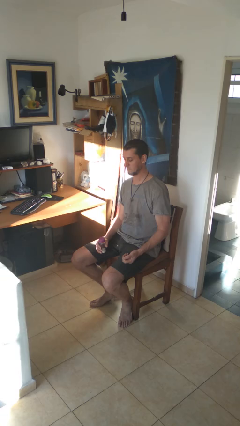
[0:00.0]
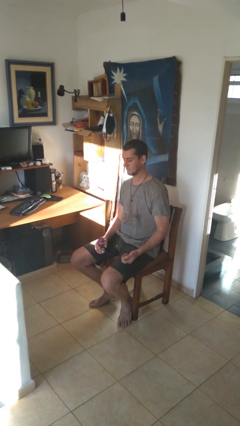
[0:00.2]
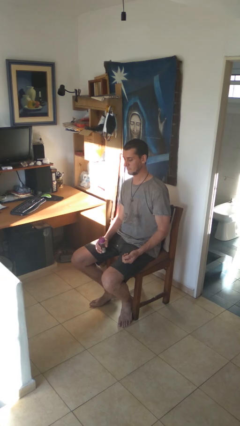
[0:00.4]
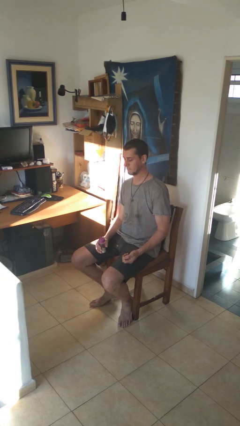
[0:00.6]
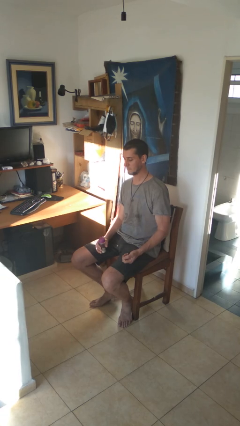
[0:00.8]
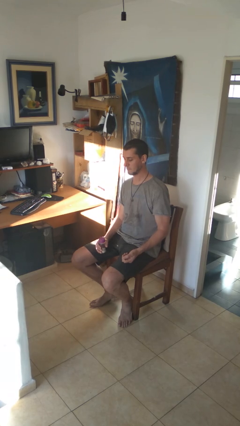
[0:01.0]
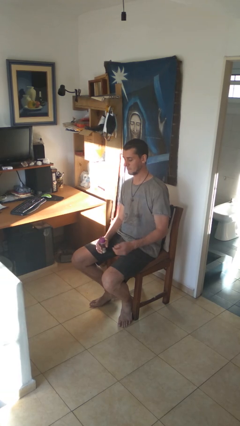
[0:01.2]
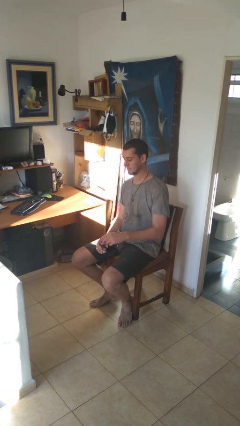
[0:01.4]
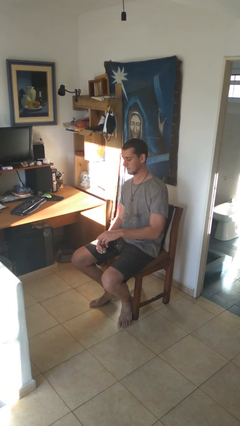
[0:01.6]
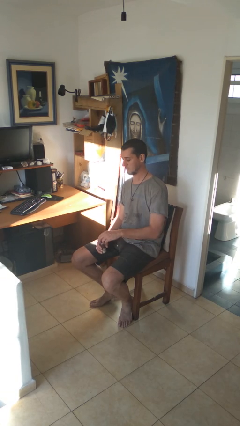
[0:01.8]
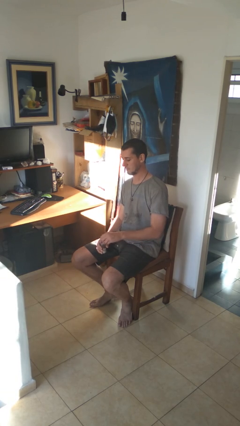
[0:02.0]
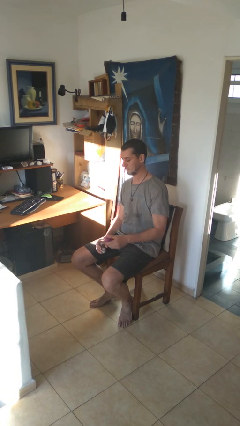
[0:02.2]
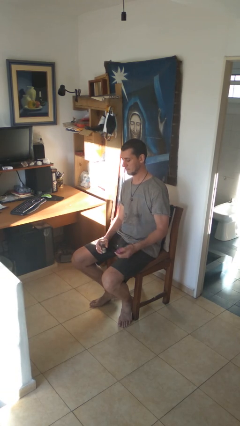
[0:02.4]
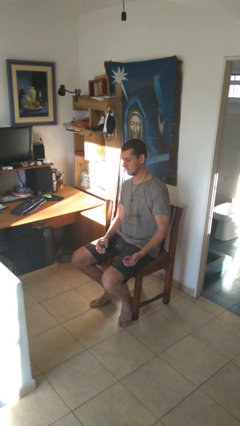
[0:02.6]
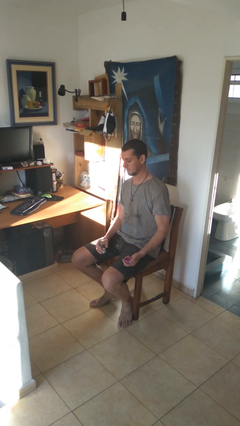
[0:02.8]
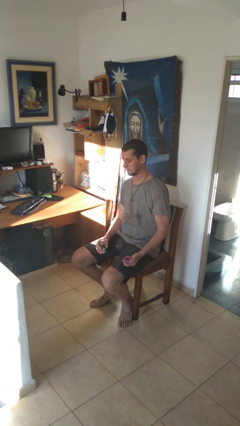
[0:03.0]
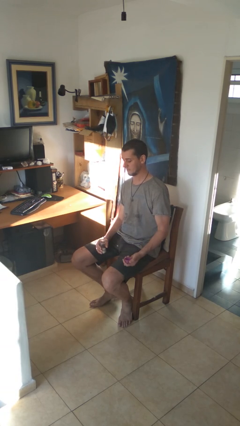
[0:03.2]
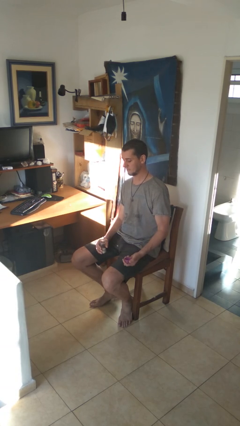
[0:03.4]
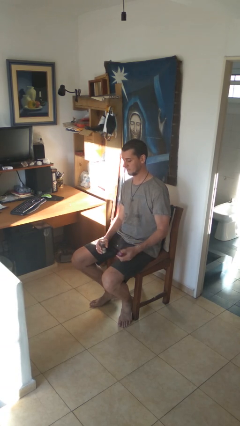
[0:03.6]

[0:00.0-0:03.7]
person opens jar

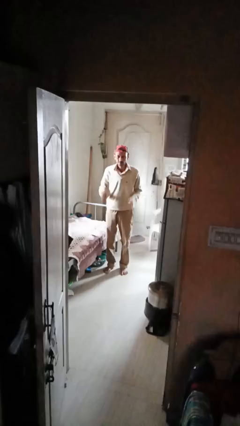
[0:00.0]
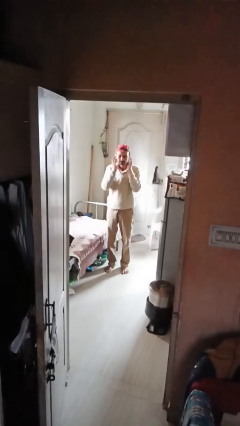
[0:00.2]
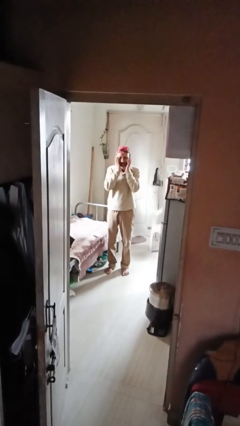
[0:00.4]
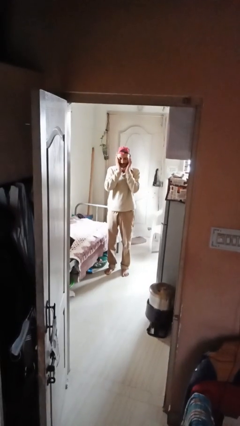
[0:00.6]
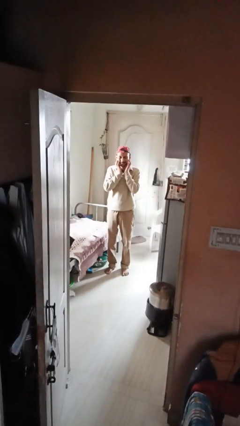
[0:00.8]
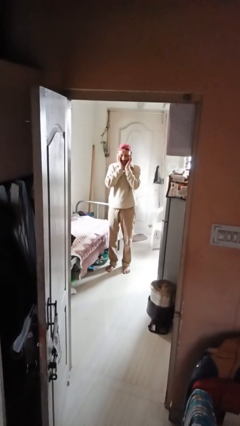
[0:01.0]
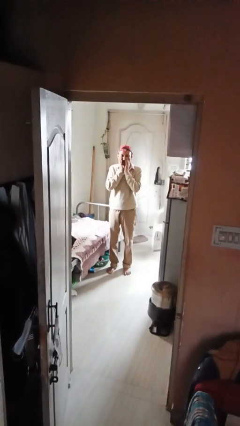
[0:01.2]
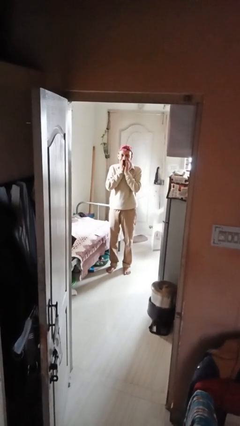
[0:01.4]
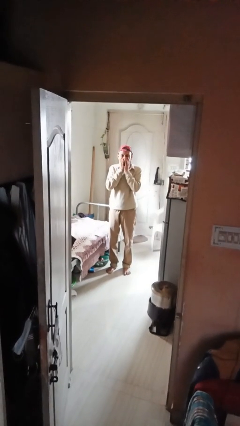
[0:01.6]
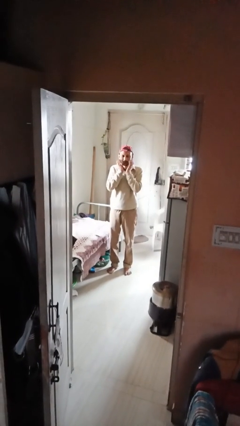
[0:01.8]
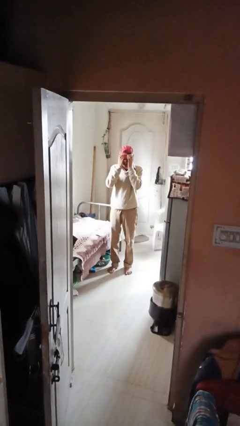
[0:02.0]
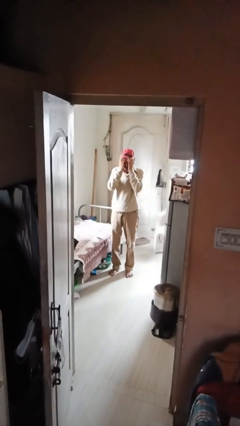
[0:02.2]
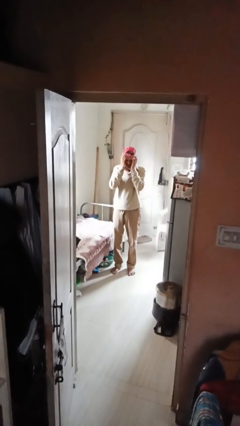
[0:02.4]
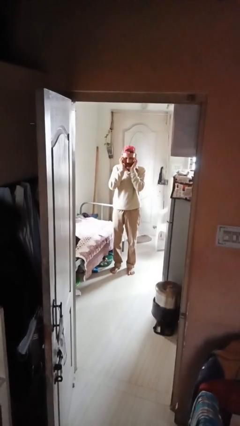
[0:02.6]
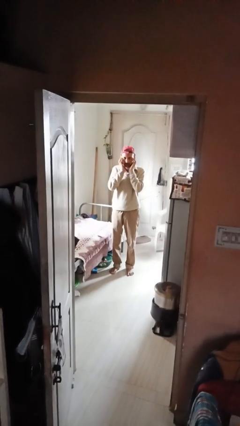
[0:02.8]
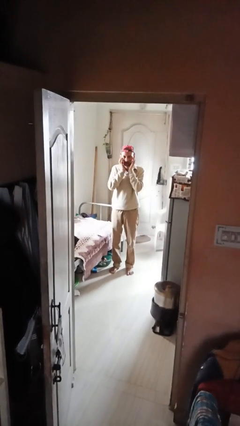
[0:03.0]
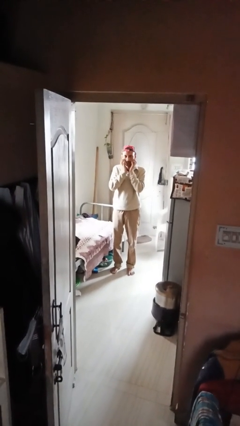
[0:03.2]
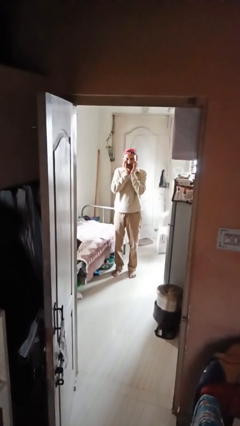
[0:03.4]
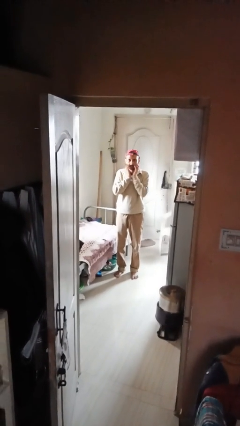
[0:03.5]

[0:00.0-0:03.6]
person scratches face

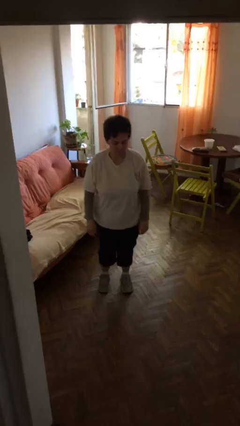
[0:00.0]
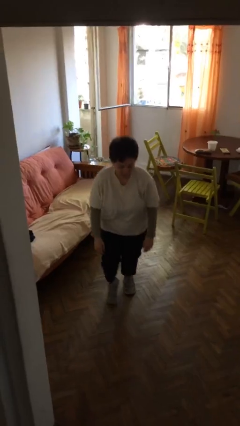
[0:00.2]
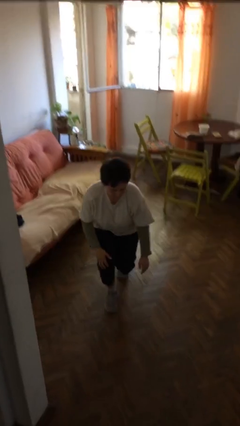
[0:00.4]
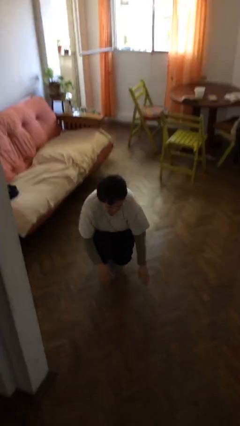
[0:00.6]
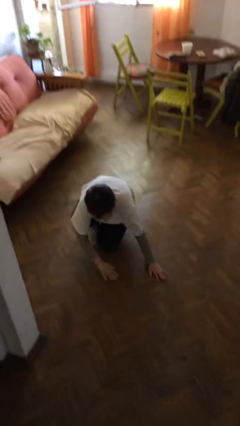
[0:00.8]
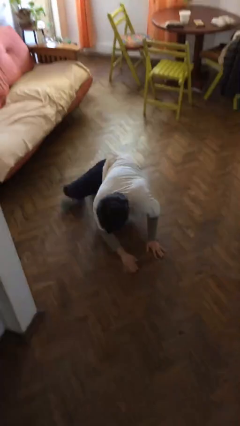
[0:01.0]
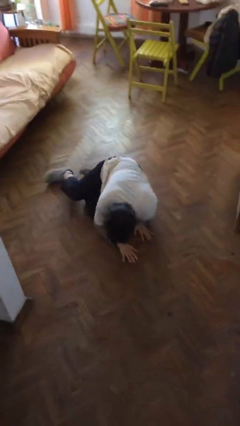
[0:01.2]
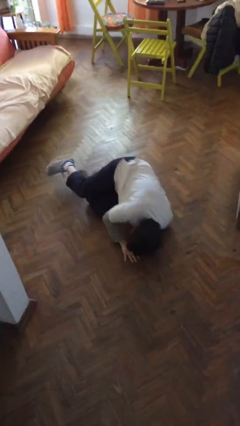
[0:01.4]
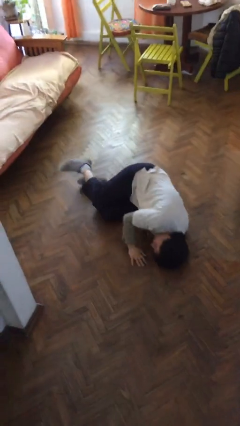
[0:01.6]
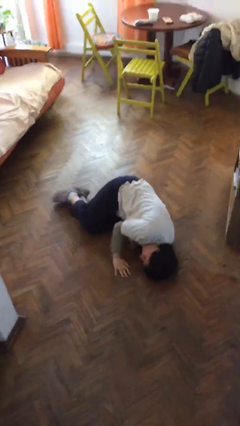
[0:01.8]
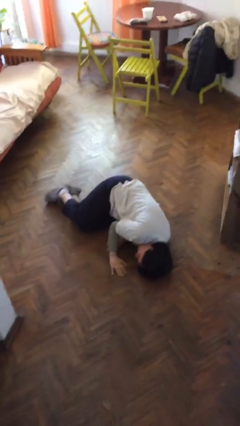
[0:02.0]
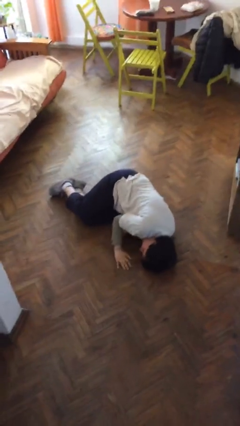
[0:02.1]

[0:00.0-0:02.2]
person falls while standing

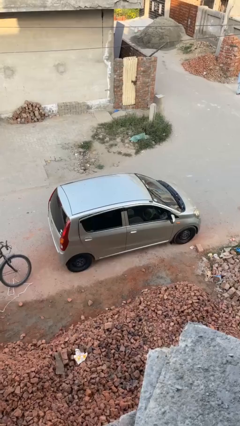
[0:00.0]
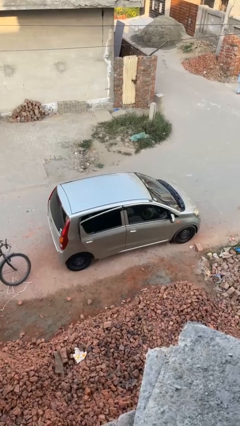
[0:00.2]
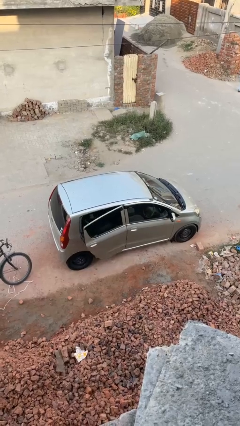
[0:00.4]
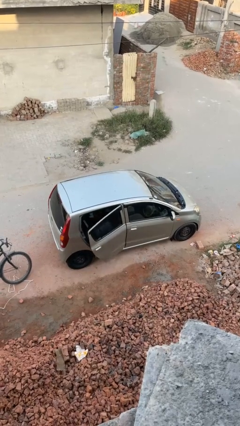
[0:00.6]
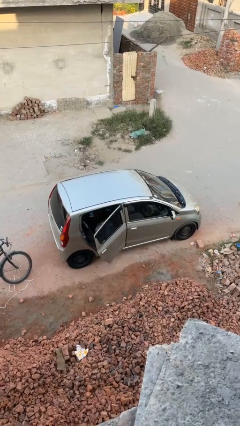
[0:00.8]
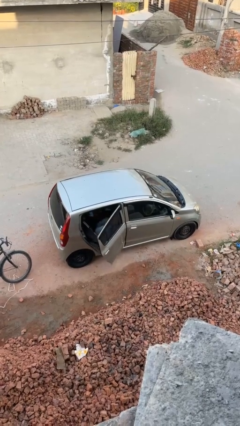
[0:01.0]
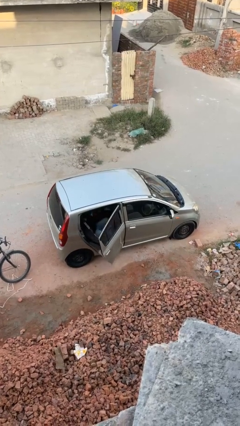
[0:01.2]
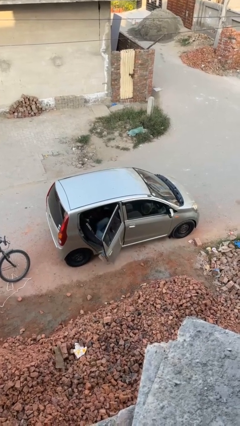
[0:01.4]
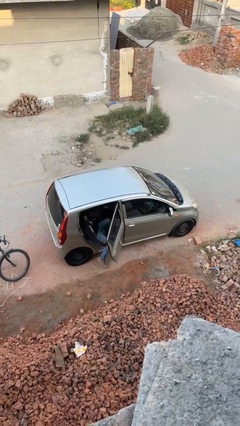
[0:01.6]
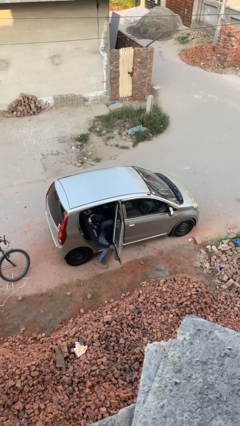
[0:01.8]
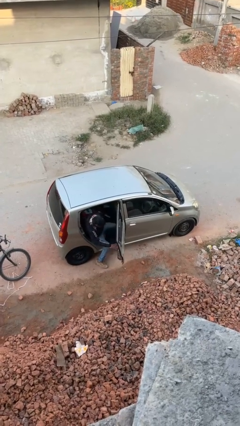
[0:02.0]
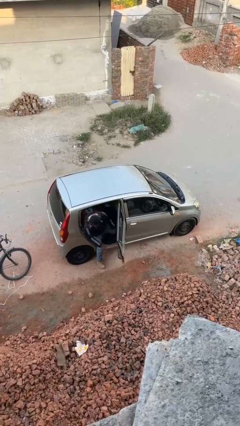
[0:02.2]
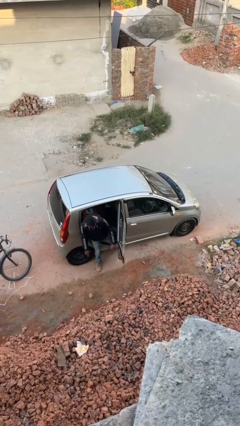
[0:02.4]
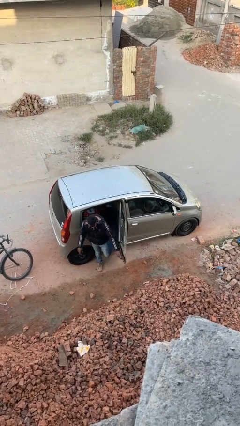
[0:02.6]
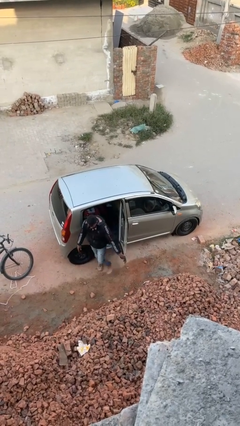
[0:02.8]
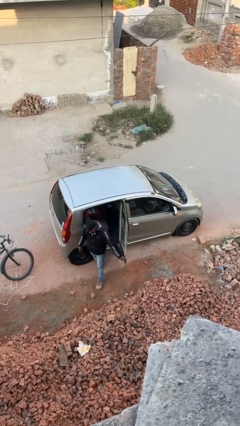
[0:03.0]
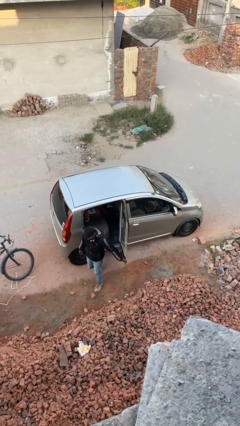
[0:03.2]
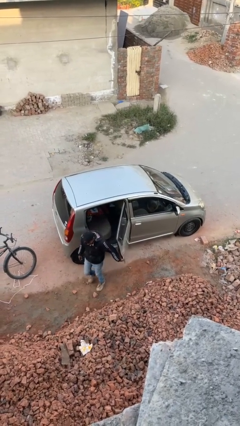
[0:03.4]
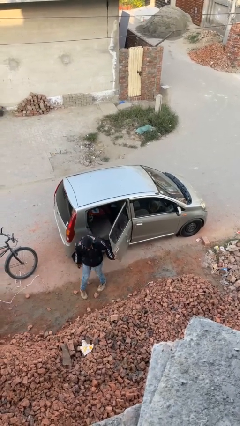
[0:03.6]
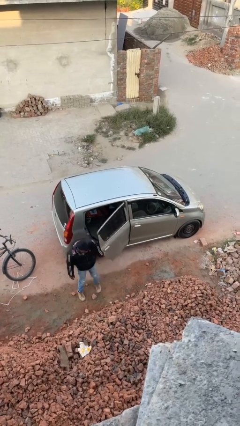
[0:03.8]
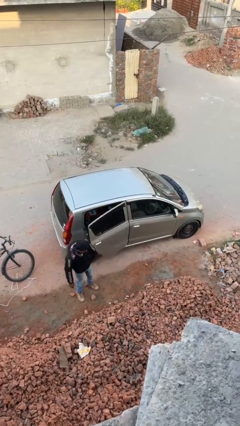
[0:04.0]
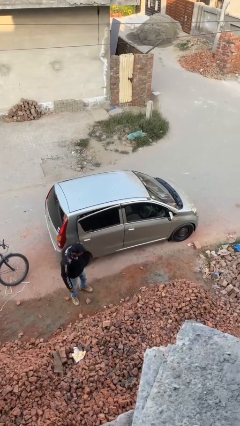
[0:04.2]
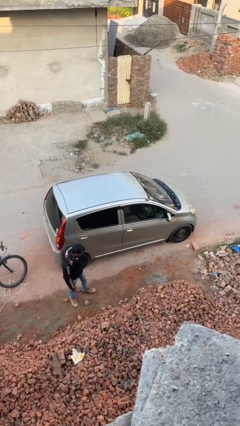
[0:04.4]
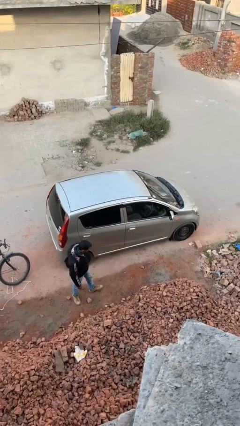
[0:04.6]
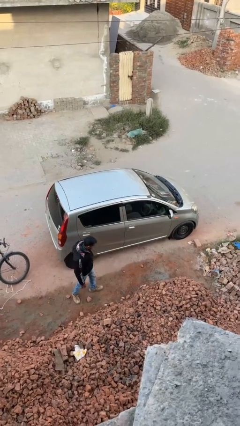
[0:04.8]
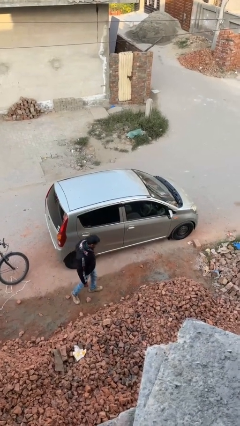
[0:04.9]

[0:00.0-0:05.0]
car drops off person

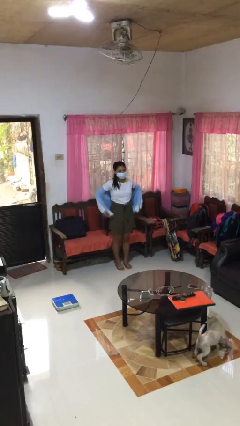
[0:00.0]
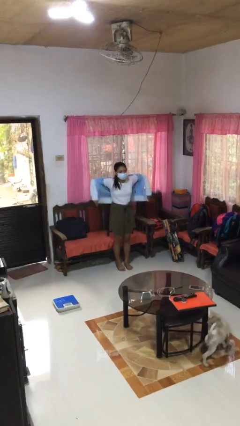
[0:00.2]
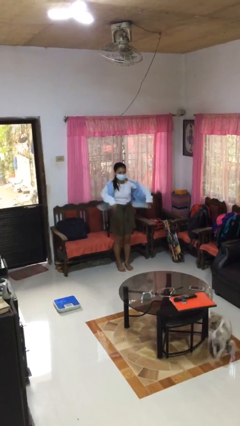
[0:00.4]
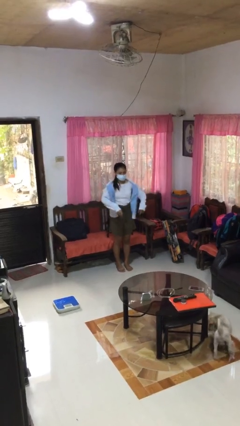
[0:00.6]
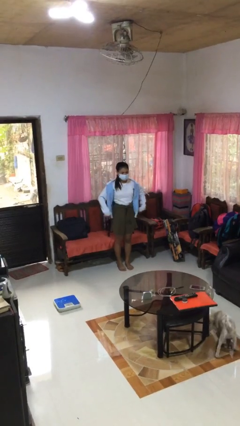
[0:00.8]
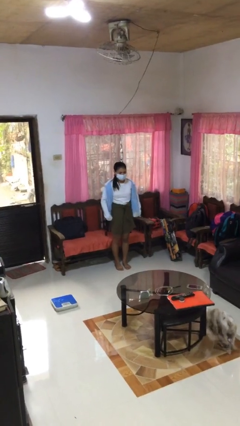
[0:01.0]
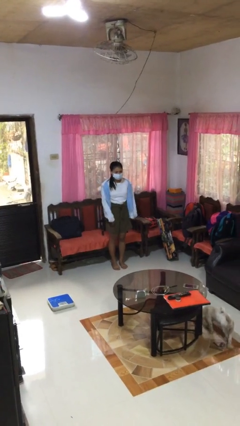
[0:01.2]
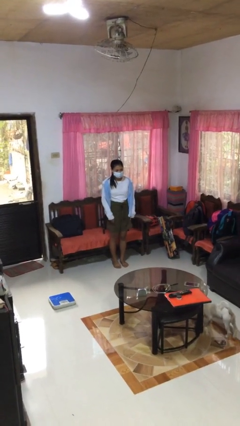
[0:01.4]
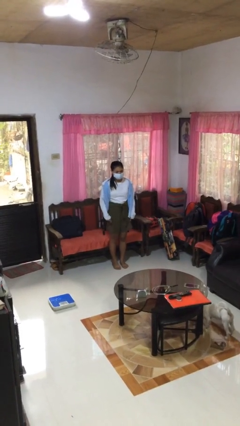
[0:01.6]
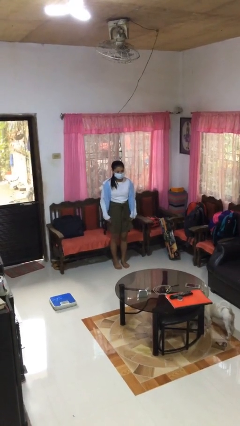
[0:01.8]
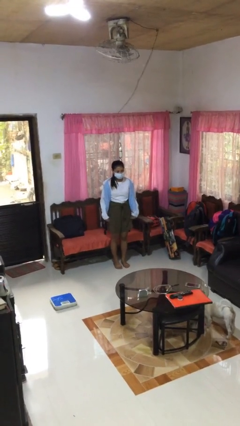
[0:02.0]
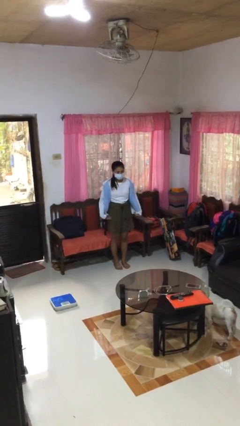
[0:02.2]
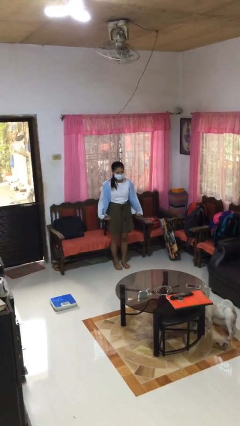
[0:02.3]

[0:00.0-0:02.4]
person puts on jacket

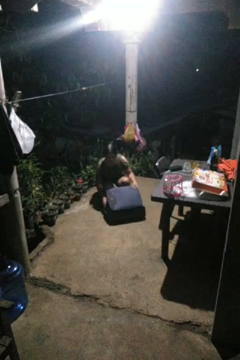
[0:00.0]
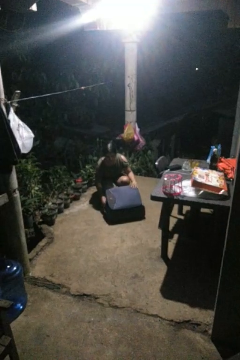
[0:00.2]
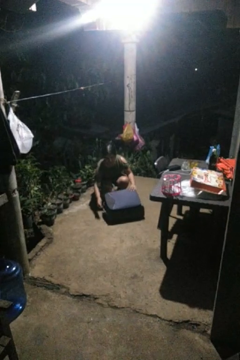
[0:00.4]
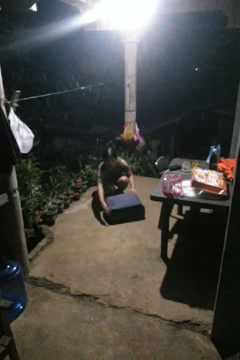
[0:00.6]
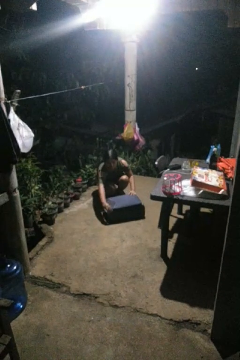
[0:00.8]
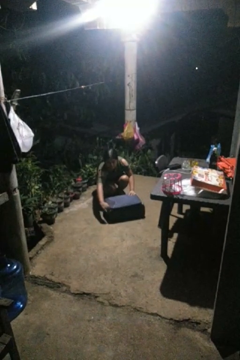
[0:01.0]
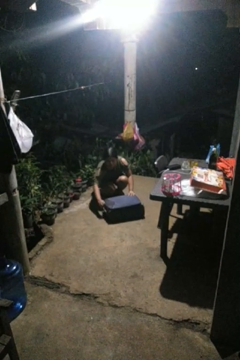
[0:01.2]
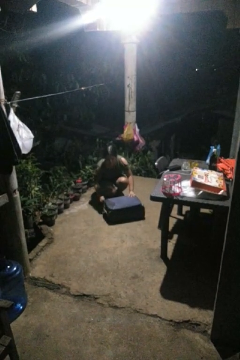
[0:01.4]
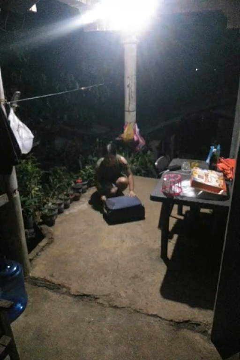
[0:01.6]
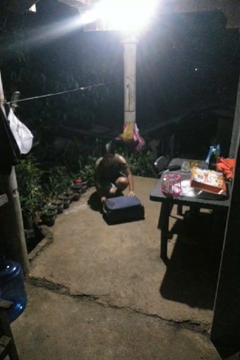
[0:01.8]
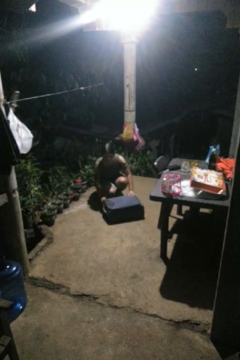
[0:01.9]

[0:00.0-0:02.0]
person closes suitcase
